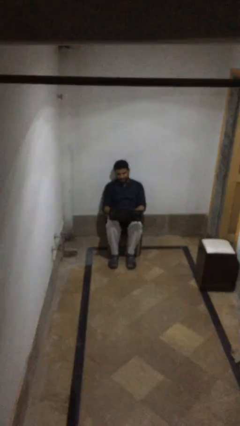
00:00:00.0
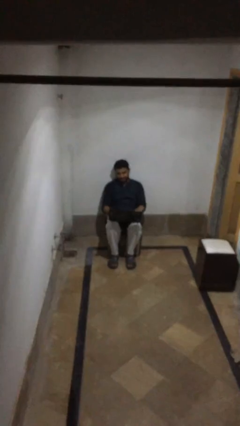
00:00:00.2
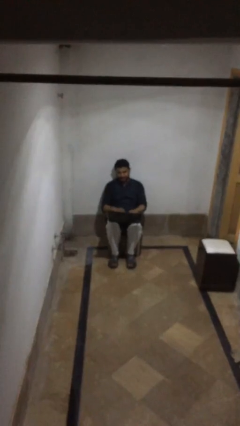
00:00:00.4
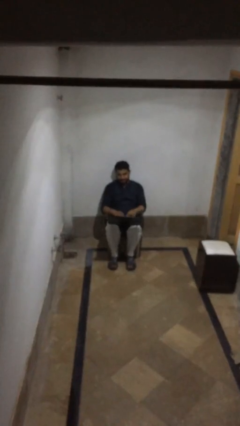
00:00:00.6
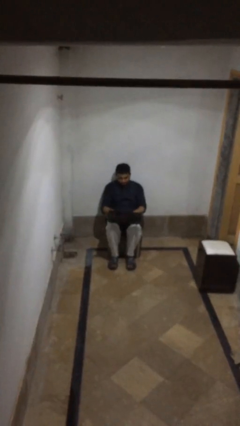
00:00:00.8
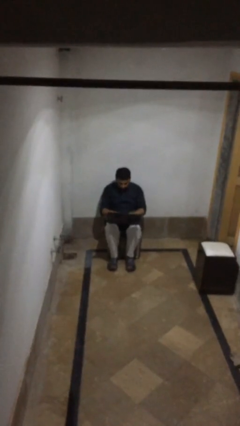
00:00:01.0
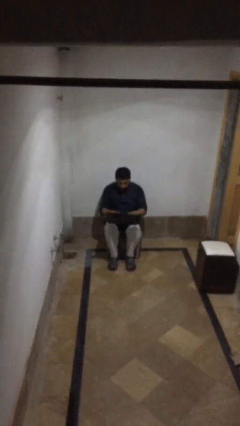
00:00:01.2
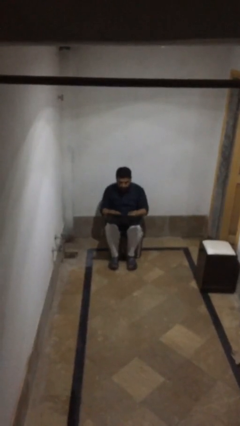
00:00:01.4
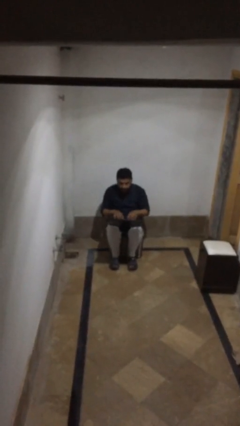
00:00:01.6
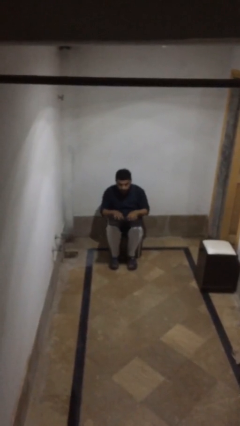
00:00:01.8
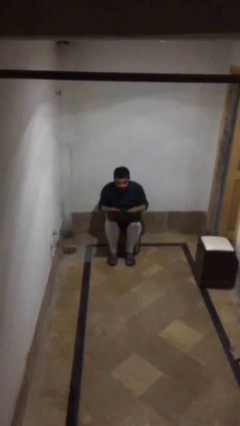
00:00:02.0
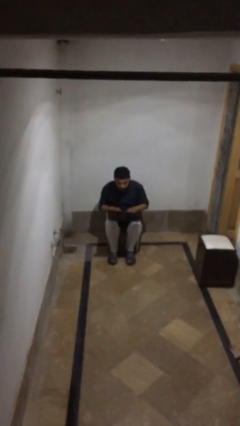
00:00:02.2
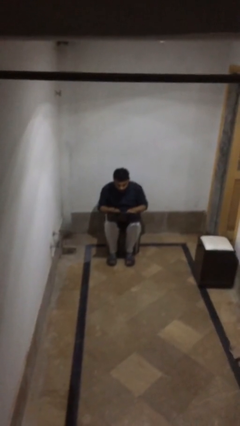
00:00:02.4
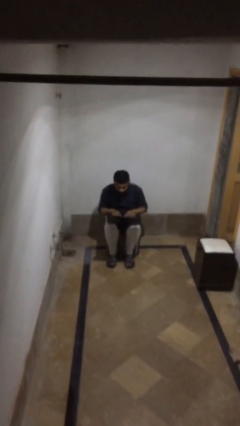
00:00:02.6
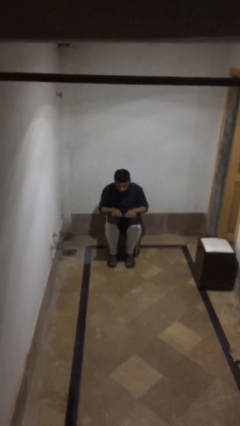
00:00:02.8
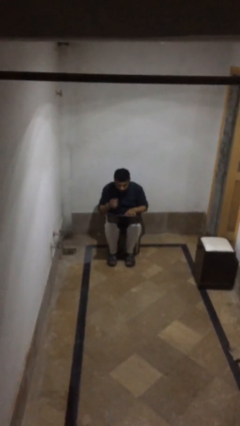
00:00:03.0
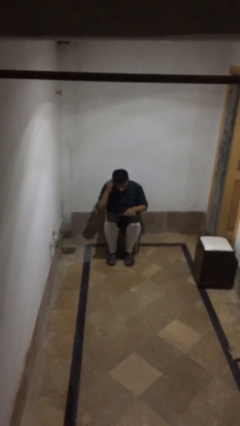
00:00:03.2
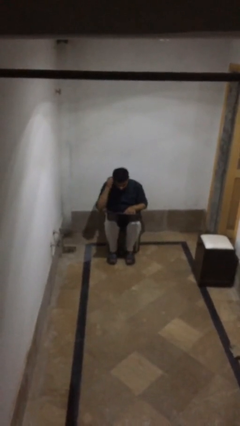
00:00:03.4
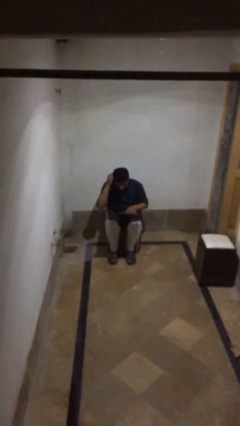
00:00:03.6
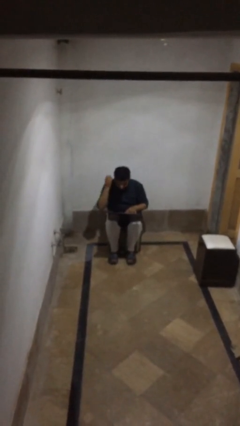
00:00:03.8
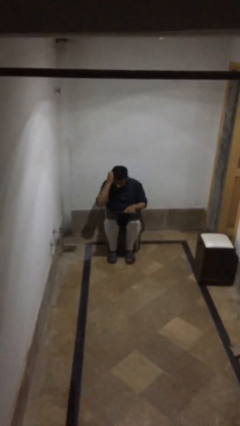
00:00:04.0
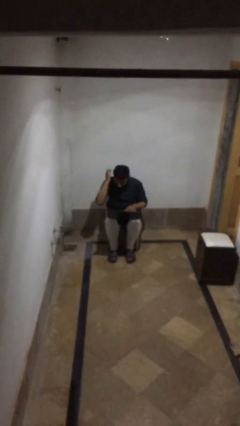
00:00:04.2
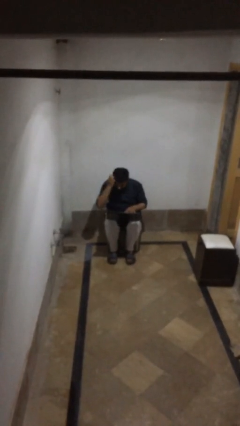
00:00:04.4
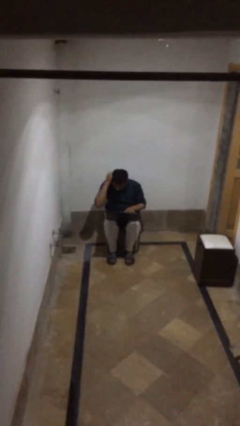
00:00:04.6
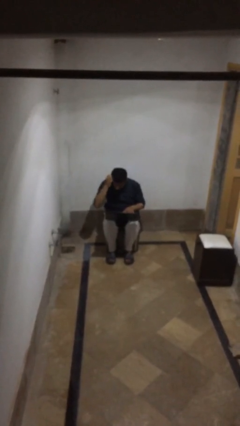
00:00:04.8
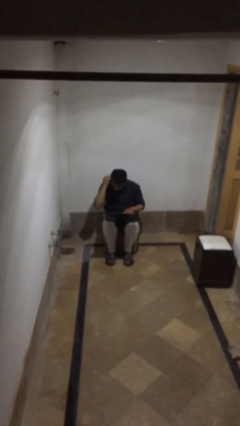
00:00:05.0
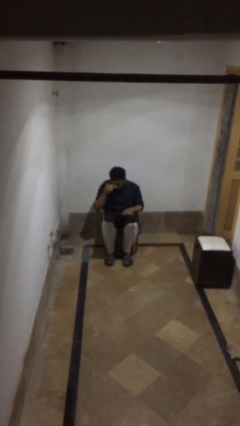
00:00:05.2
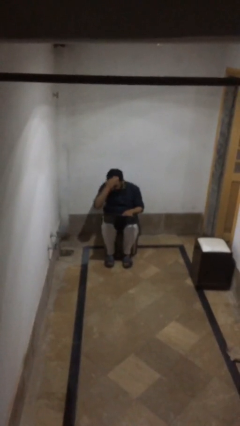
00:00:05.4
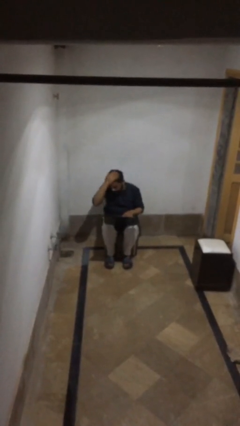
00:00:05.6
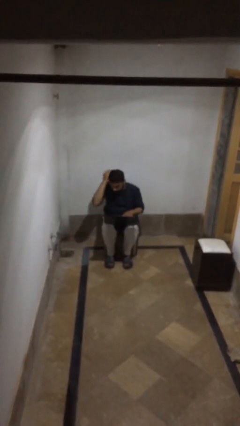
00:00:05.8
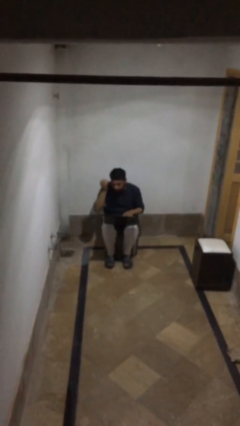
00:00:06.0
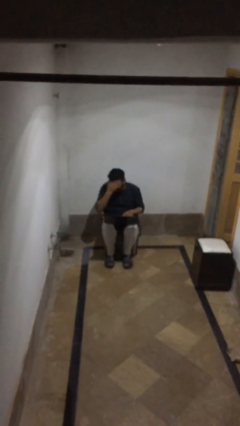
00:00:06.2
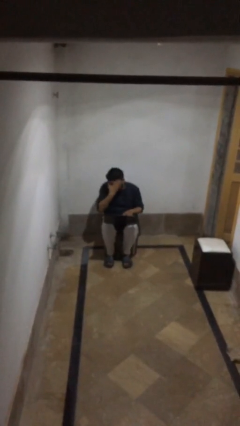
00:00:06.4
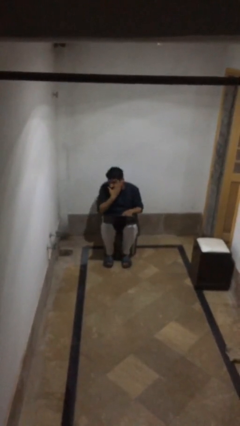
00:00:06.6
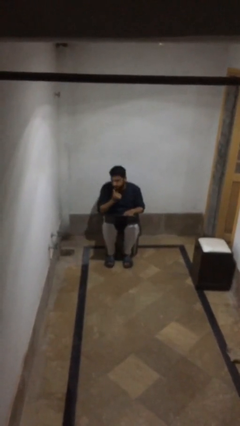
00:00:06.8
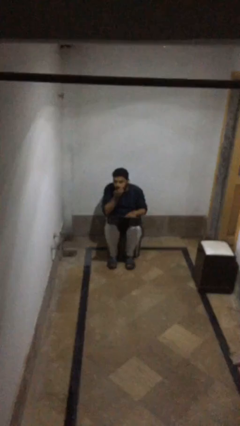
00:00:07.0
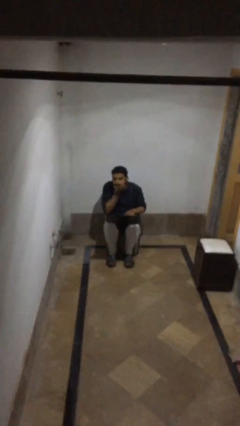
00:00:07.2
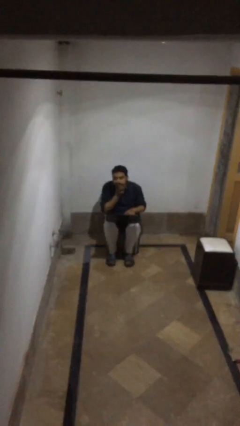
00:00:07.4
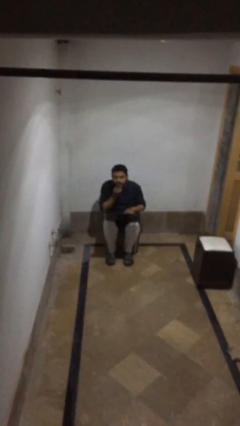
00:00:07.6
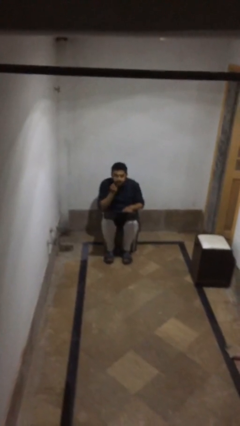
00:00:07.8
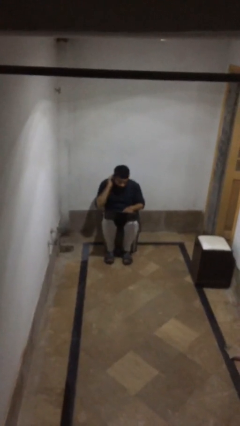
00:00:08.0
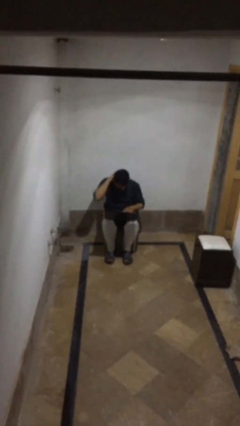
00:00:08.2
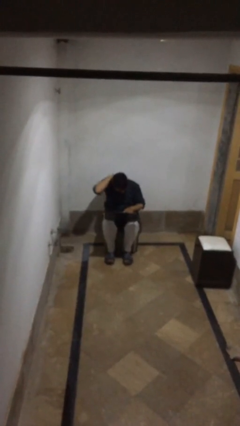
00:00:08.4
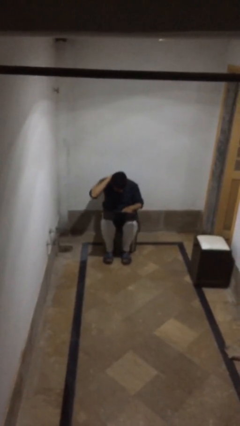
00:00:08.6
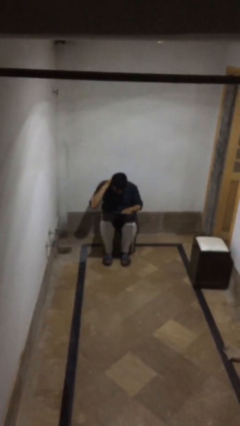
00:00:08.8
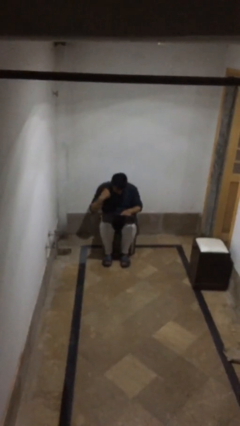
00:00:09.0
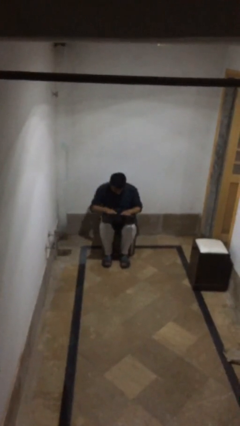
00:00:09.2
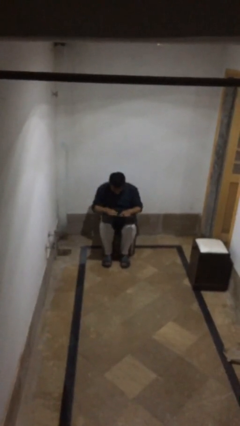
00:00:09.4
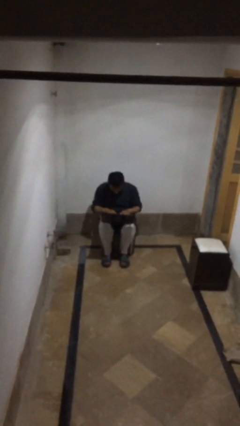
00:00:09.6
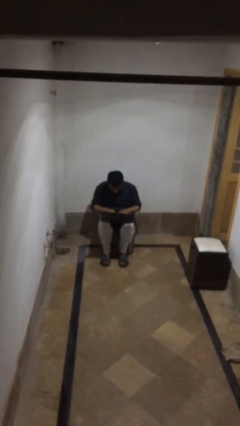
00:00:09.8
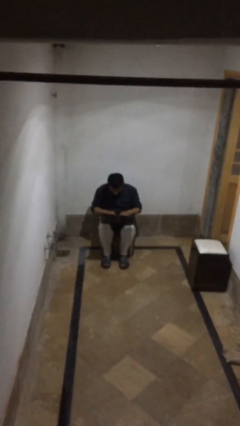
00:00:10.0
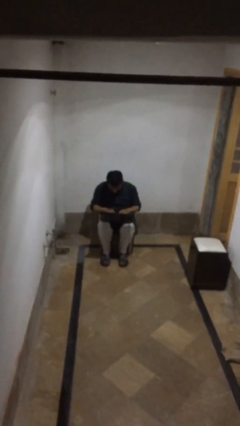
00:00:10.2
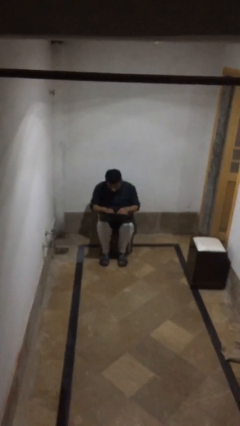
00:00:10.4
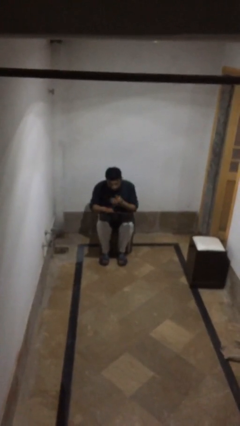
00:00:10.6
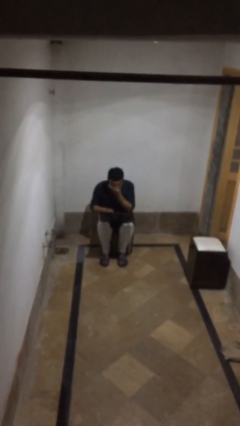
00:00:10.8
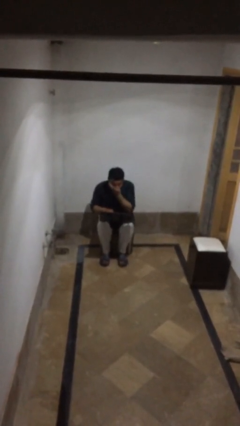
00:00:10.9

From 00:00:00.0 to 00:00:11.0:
person interacts with laptop

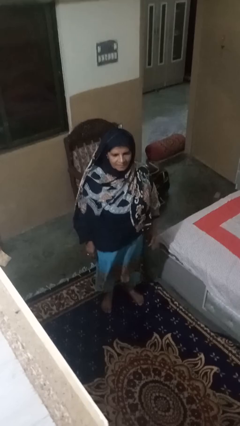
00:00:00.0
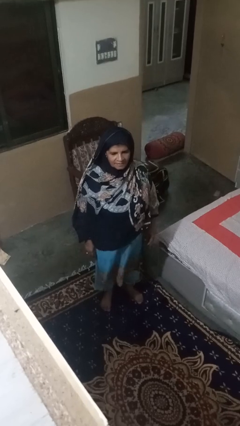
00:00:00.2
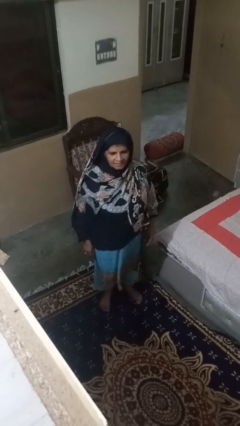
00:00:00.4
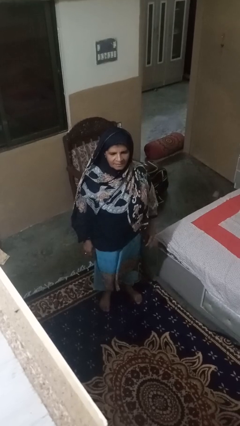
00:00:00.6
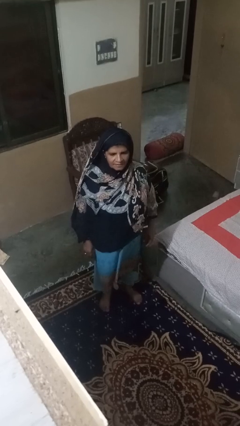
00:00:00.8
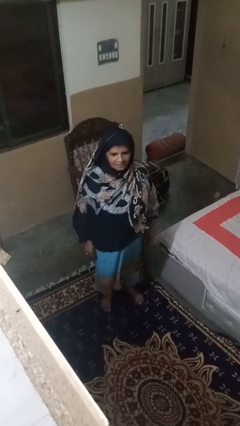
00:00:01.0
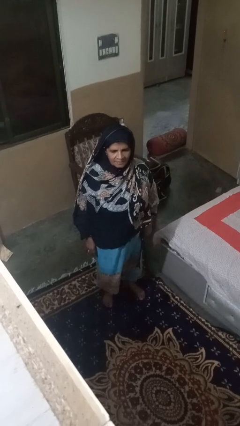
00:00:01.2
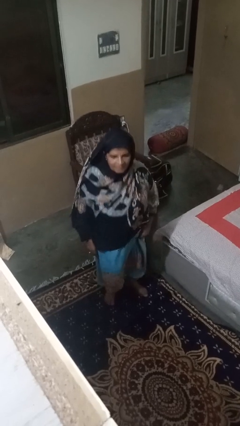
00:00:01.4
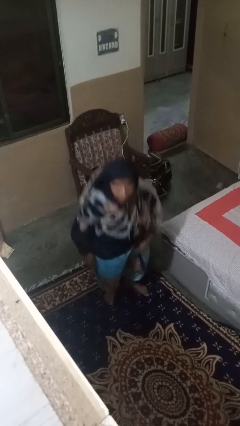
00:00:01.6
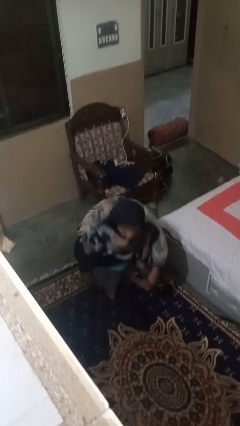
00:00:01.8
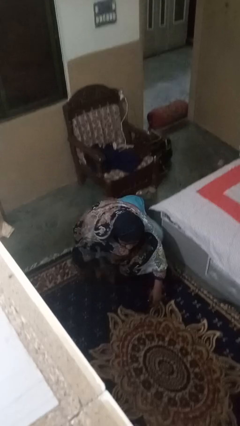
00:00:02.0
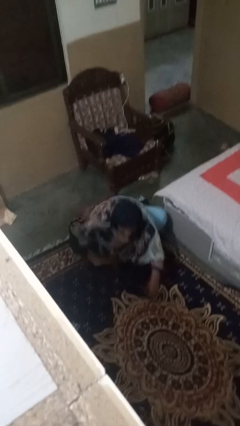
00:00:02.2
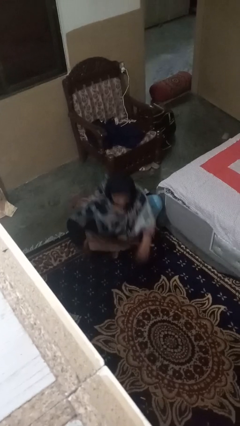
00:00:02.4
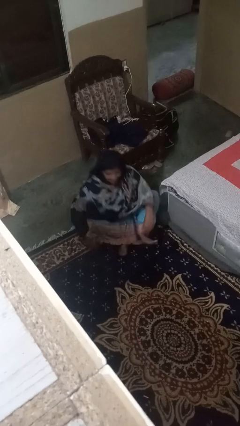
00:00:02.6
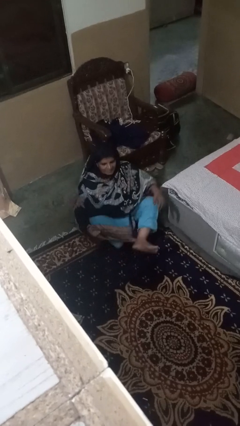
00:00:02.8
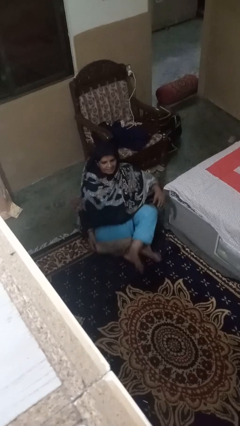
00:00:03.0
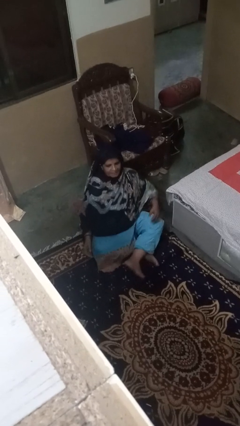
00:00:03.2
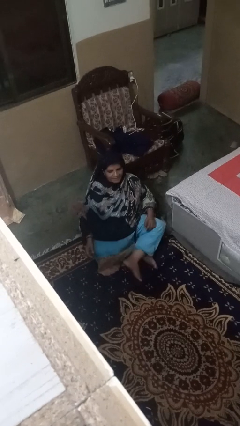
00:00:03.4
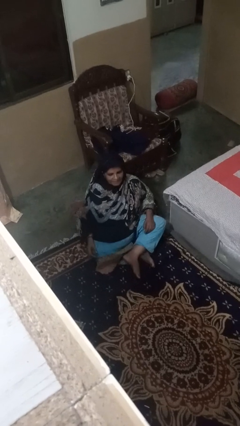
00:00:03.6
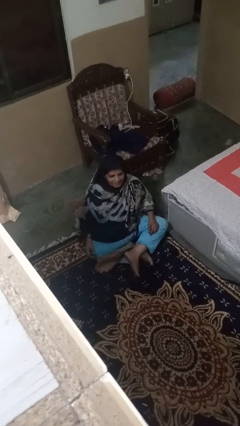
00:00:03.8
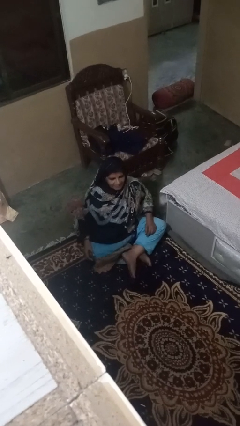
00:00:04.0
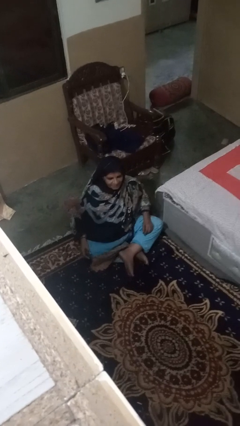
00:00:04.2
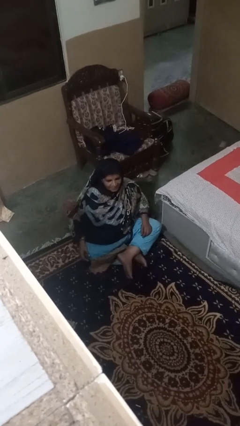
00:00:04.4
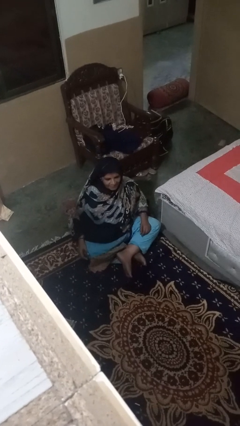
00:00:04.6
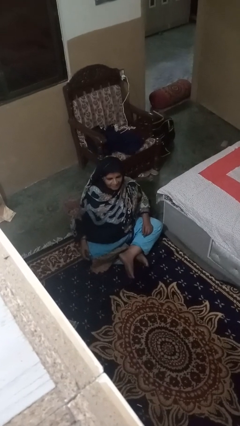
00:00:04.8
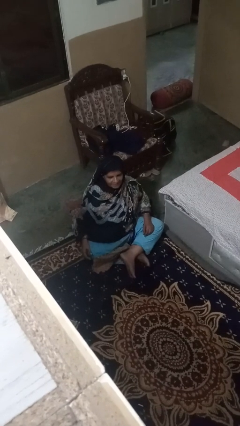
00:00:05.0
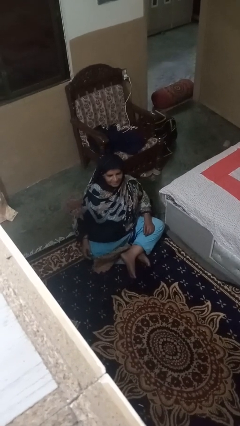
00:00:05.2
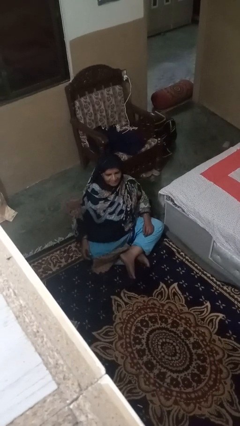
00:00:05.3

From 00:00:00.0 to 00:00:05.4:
person sits crisscross

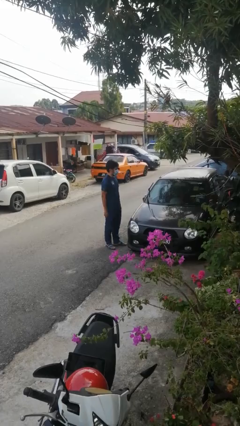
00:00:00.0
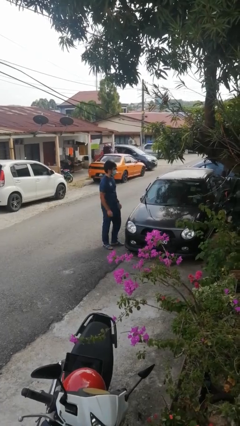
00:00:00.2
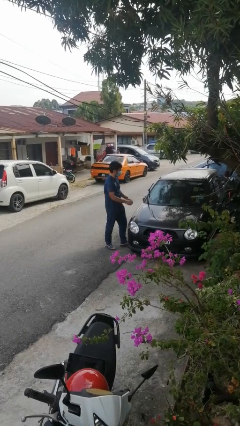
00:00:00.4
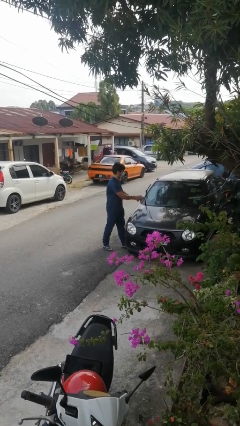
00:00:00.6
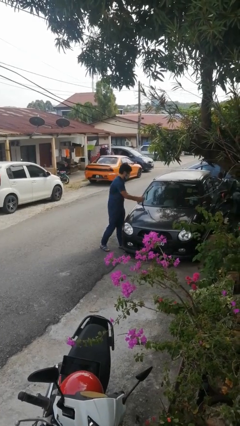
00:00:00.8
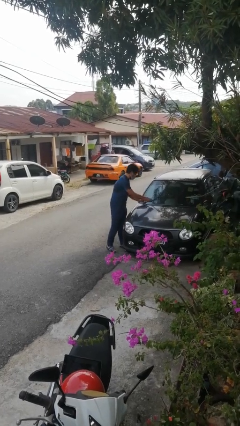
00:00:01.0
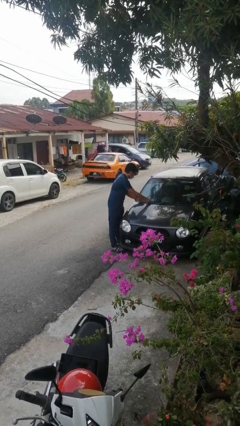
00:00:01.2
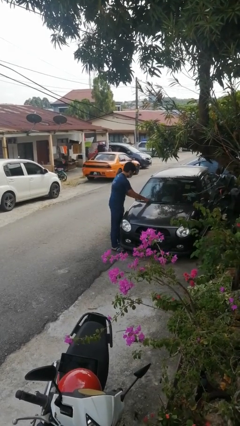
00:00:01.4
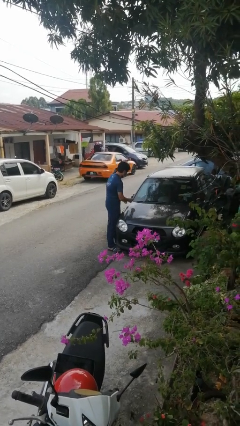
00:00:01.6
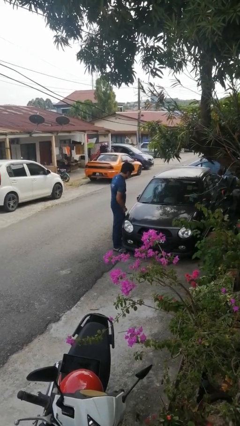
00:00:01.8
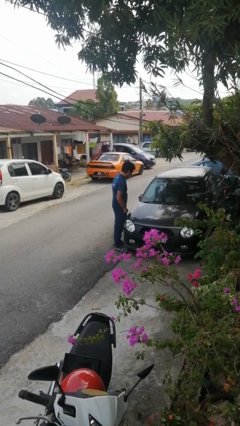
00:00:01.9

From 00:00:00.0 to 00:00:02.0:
person flips down car wipers
